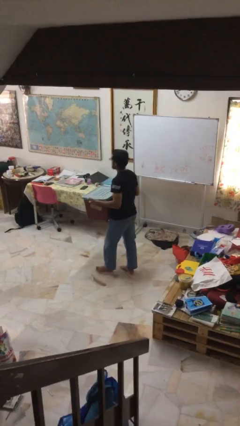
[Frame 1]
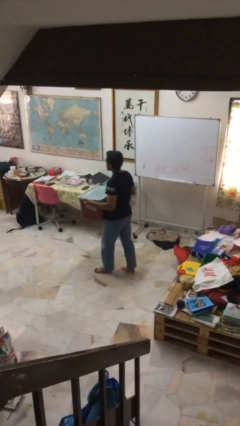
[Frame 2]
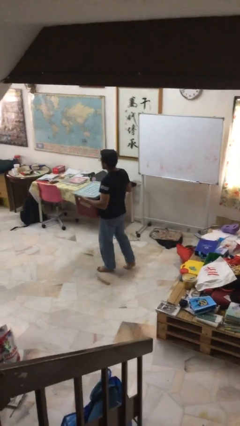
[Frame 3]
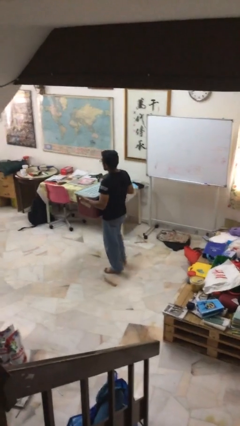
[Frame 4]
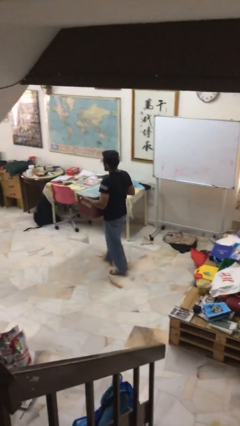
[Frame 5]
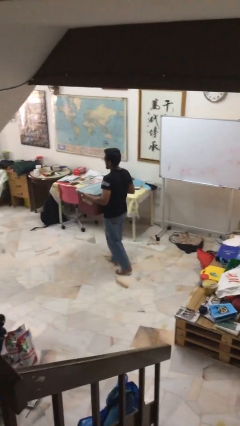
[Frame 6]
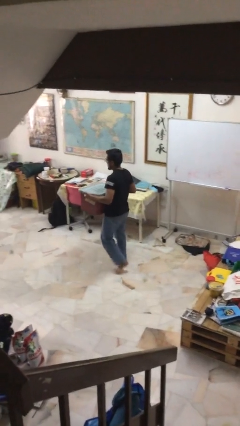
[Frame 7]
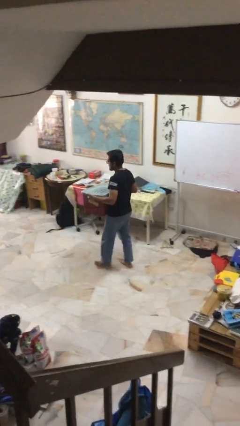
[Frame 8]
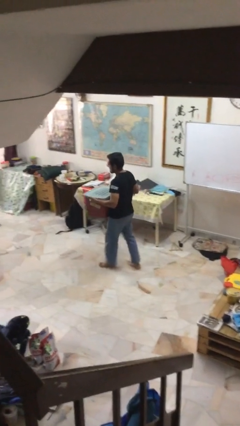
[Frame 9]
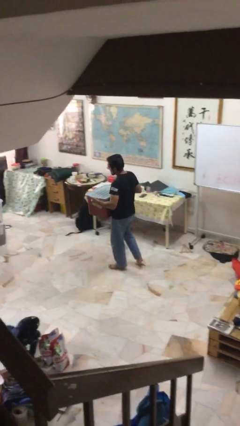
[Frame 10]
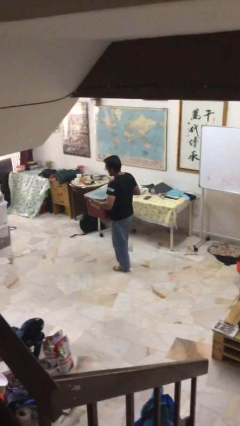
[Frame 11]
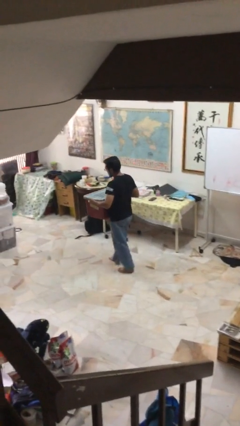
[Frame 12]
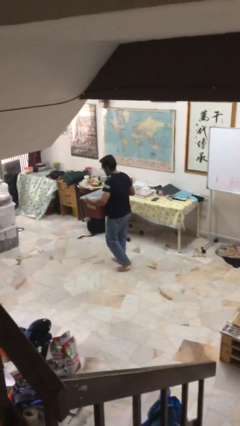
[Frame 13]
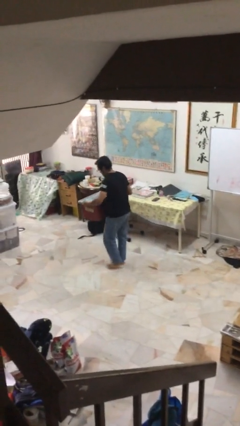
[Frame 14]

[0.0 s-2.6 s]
person carries heavy object

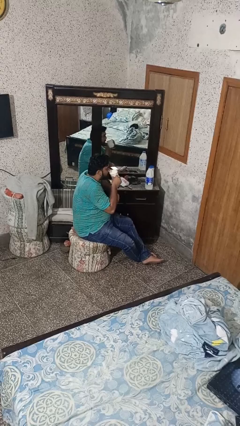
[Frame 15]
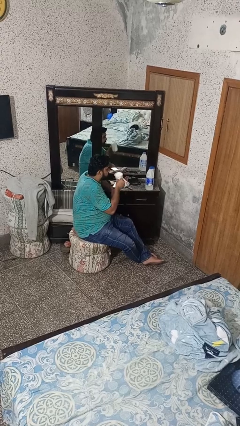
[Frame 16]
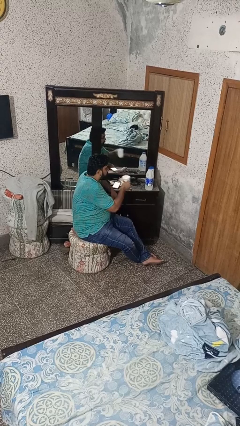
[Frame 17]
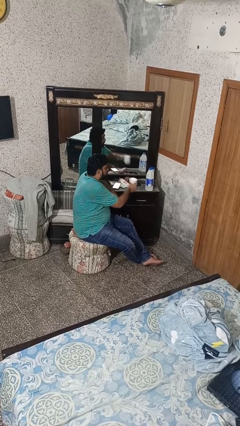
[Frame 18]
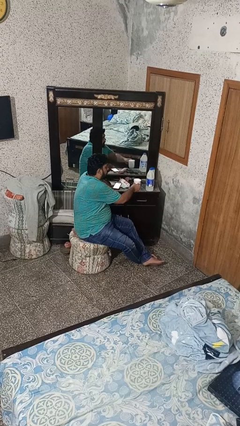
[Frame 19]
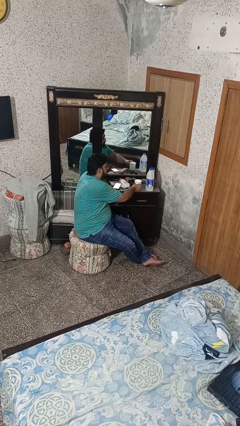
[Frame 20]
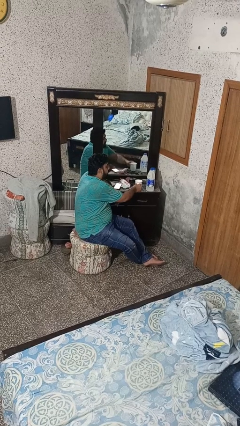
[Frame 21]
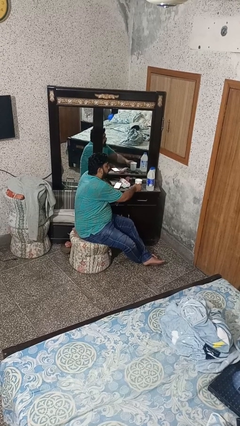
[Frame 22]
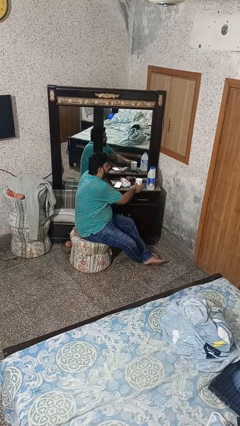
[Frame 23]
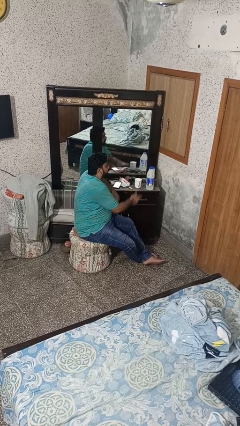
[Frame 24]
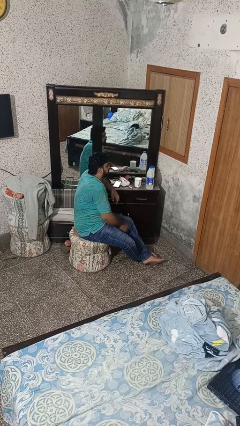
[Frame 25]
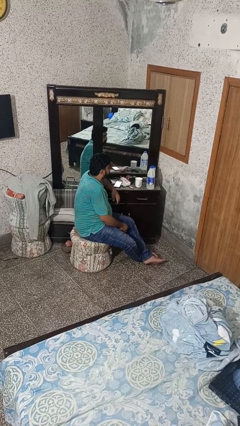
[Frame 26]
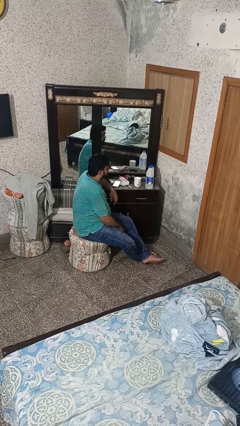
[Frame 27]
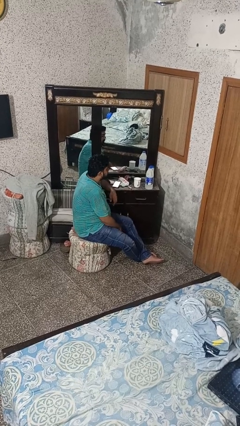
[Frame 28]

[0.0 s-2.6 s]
person puts down object on table

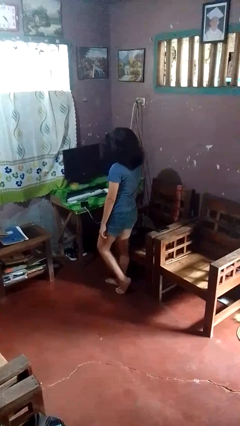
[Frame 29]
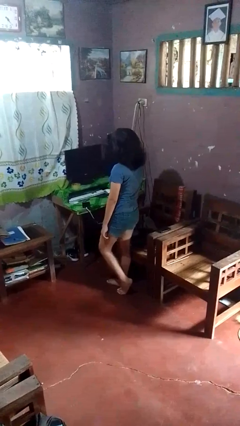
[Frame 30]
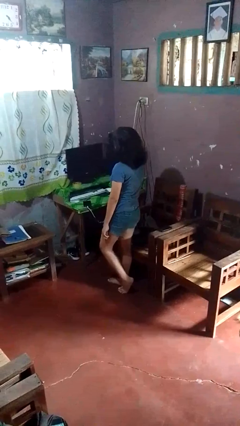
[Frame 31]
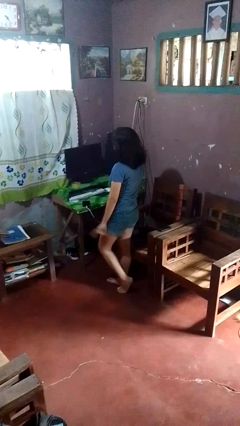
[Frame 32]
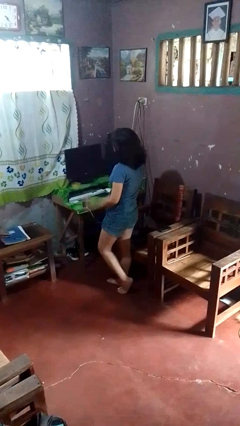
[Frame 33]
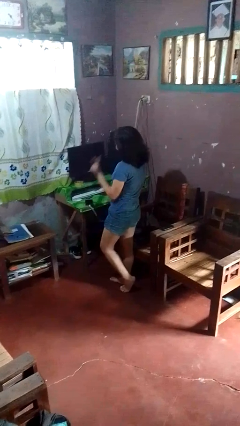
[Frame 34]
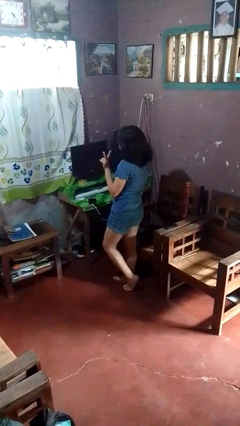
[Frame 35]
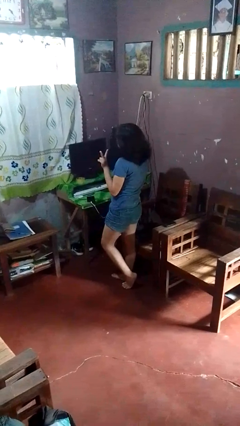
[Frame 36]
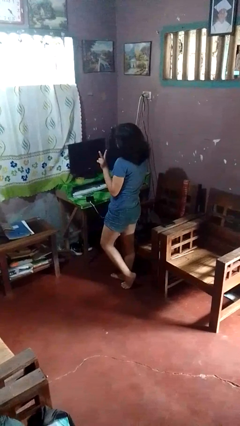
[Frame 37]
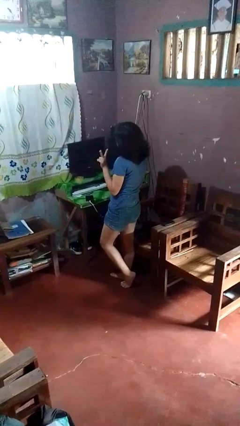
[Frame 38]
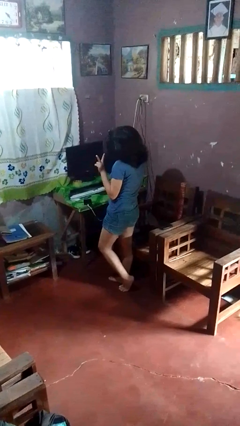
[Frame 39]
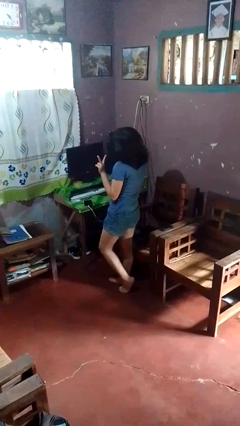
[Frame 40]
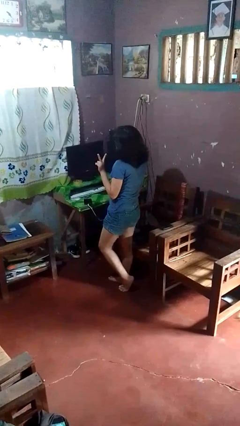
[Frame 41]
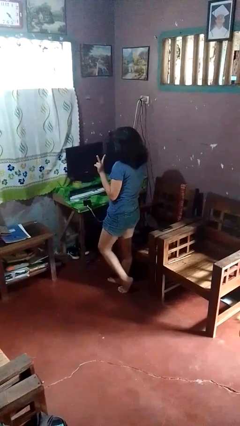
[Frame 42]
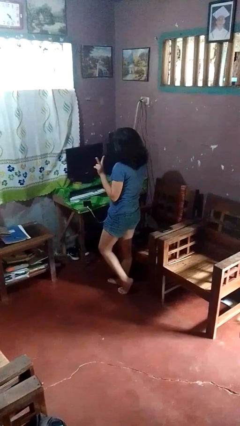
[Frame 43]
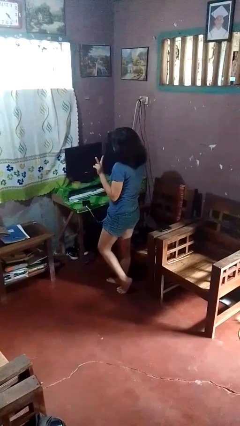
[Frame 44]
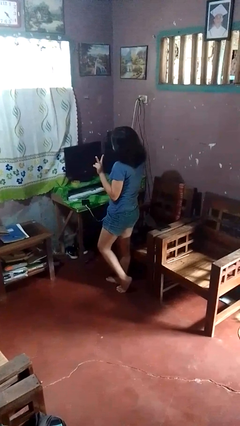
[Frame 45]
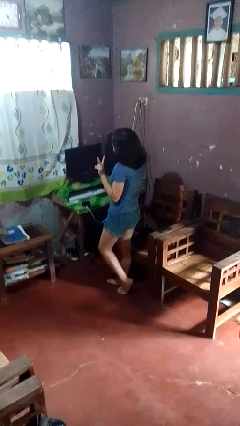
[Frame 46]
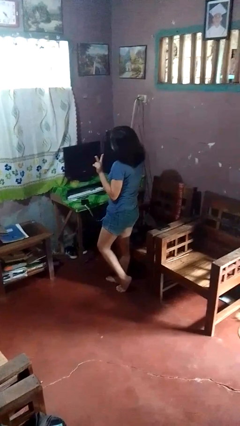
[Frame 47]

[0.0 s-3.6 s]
person gestures peace

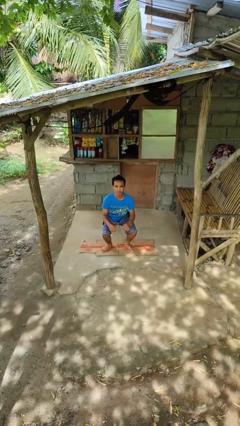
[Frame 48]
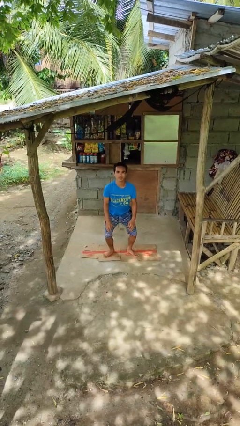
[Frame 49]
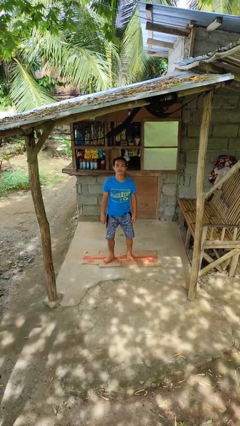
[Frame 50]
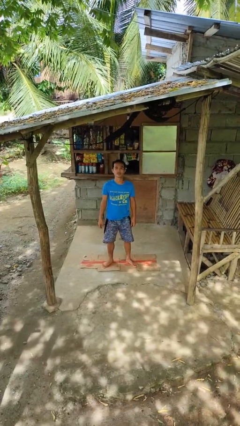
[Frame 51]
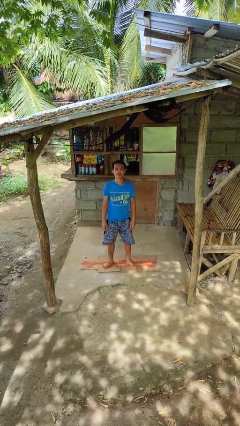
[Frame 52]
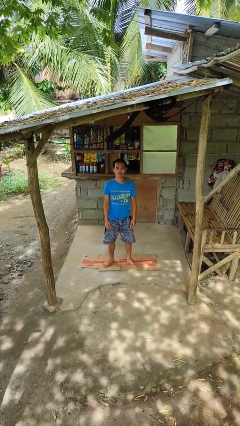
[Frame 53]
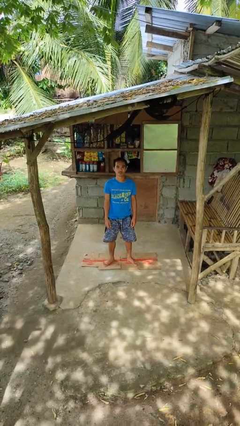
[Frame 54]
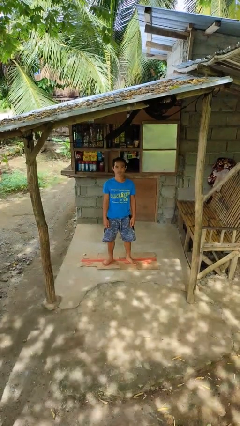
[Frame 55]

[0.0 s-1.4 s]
person stands up

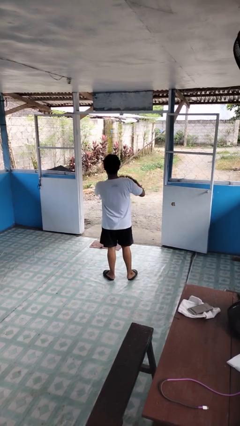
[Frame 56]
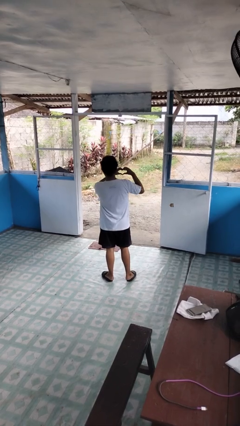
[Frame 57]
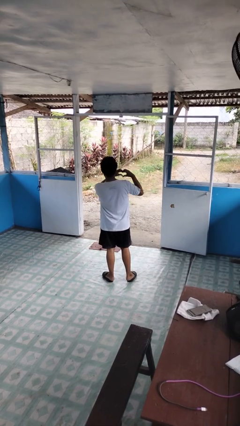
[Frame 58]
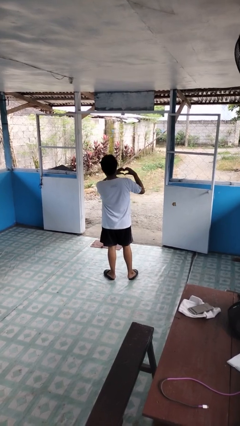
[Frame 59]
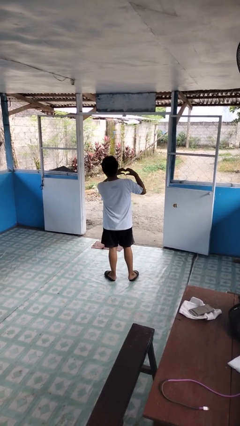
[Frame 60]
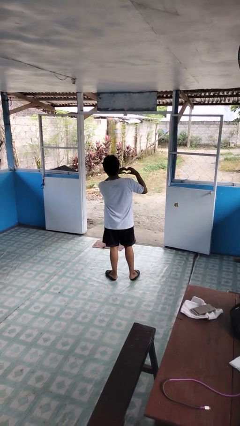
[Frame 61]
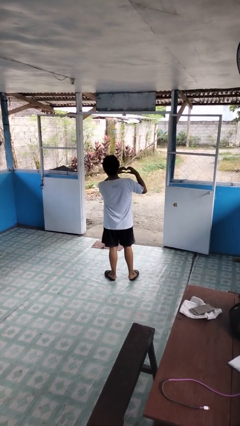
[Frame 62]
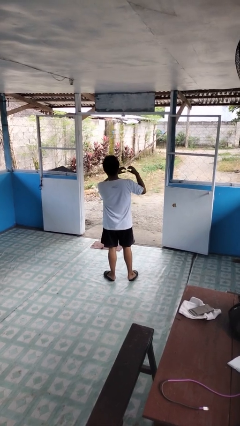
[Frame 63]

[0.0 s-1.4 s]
person gestures heart

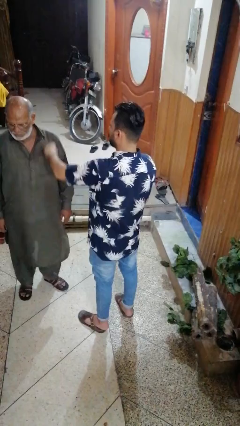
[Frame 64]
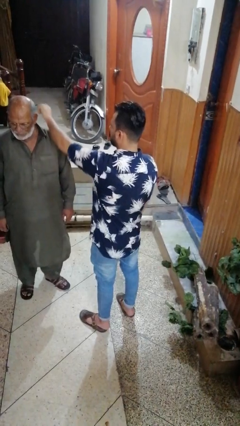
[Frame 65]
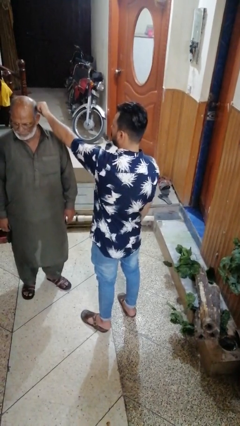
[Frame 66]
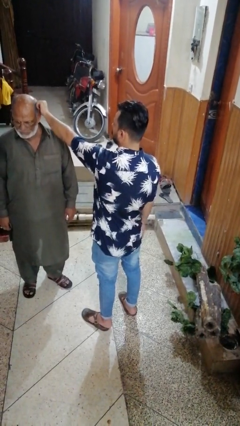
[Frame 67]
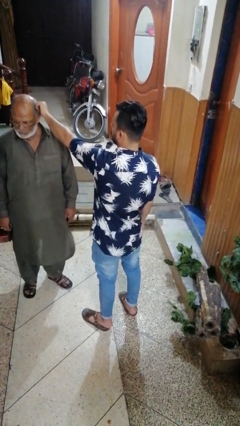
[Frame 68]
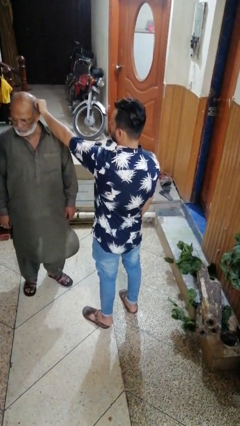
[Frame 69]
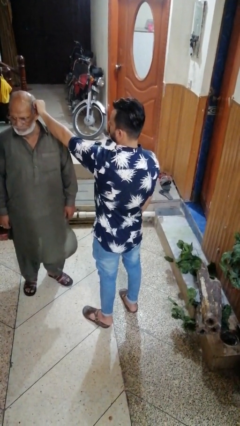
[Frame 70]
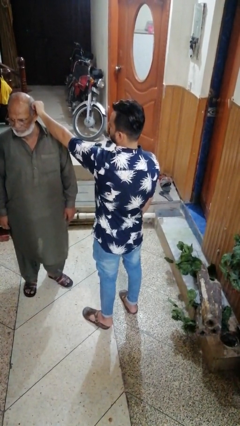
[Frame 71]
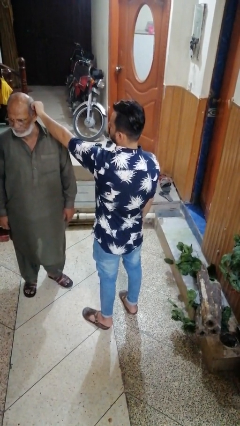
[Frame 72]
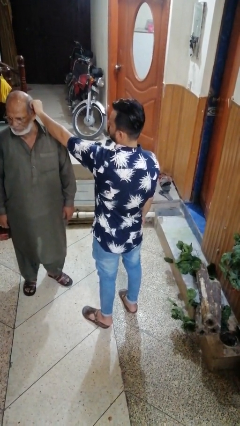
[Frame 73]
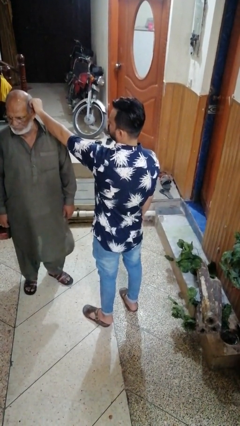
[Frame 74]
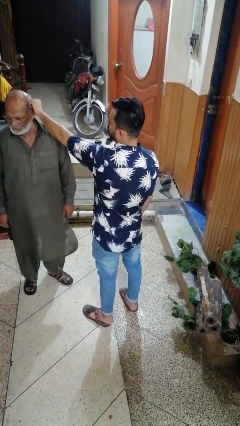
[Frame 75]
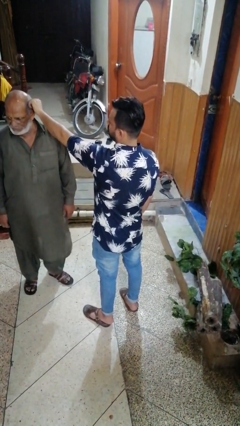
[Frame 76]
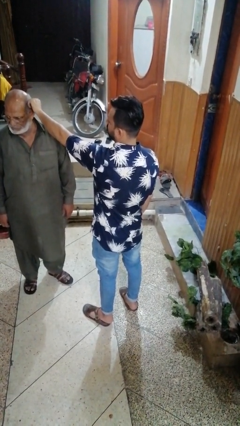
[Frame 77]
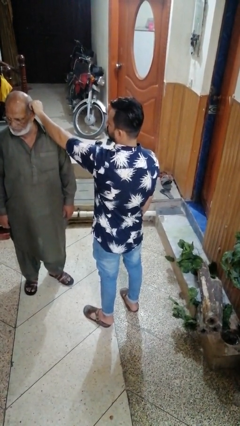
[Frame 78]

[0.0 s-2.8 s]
person grabs person by hair

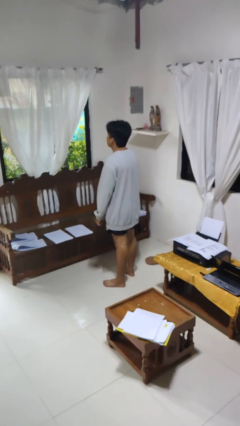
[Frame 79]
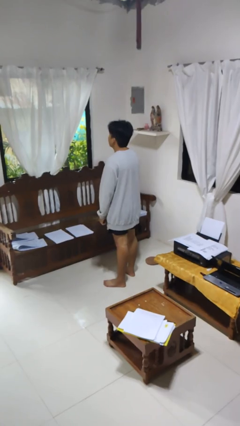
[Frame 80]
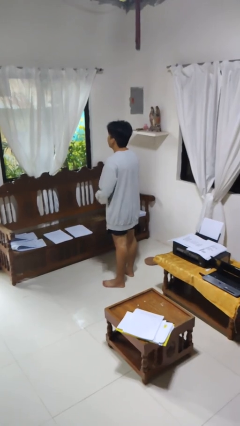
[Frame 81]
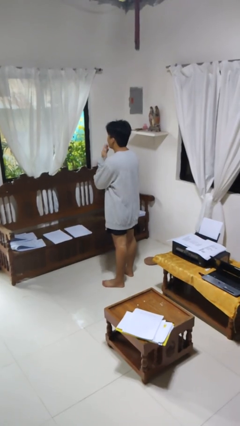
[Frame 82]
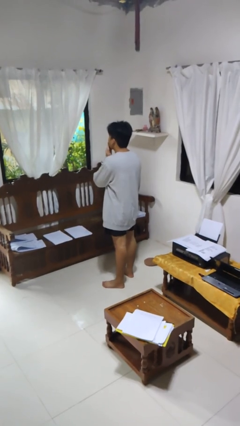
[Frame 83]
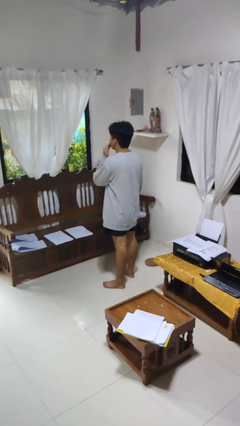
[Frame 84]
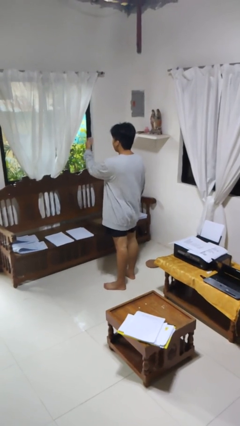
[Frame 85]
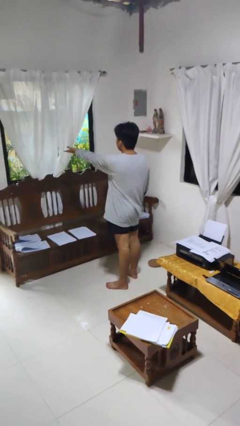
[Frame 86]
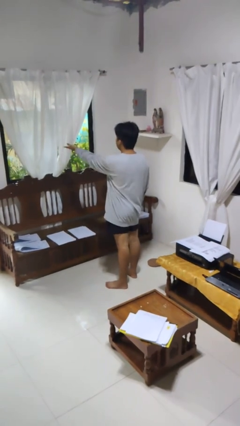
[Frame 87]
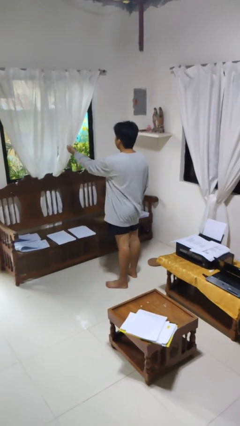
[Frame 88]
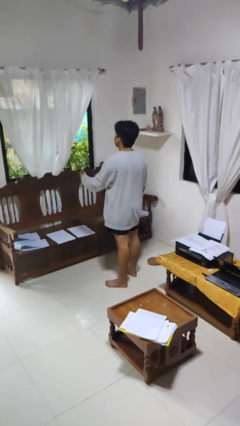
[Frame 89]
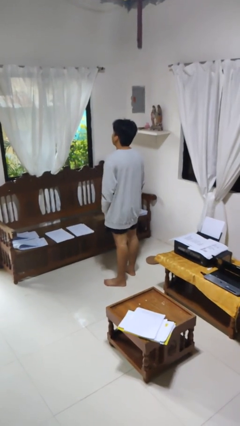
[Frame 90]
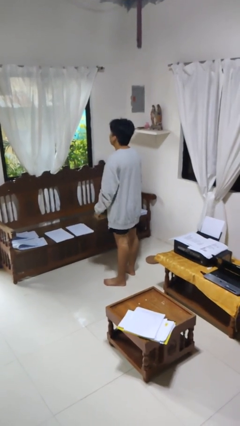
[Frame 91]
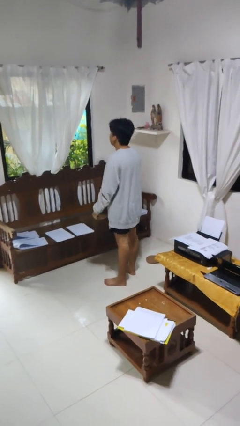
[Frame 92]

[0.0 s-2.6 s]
person gestures blow kiss
